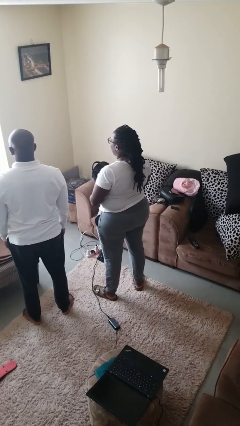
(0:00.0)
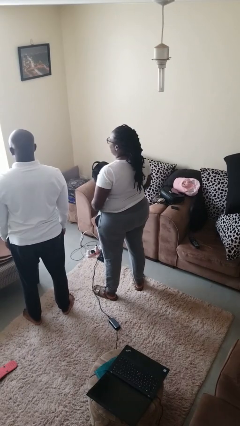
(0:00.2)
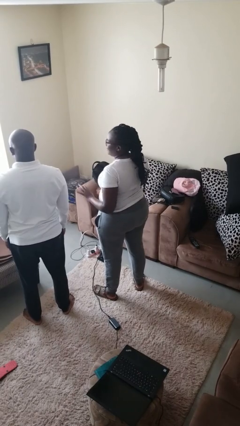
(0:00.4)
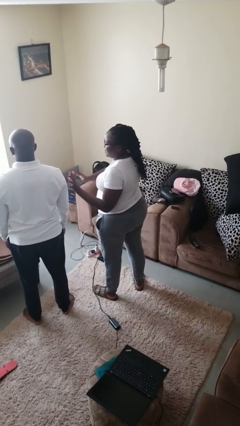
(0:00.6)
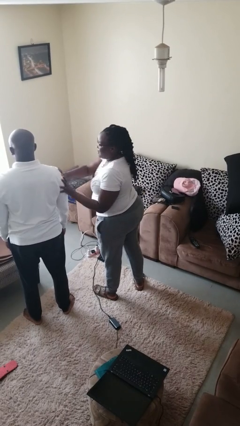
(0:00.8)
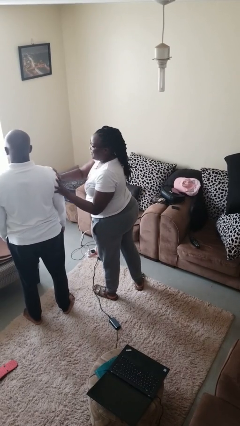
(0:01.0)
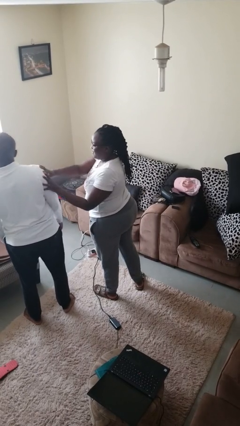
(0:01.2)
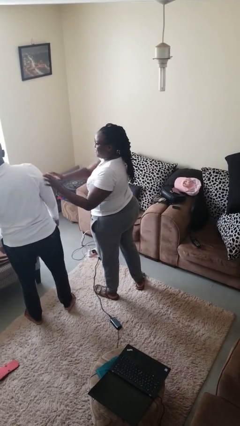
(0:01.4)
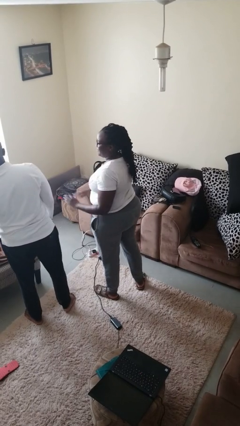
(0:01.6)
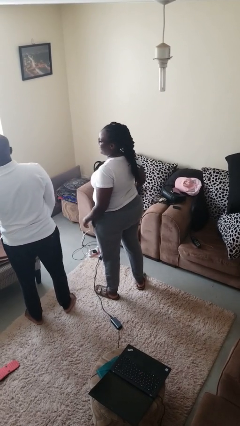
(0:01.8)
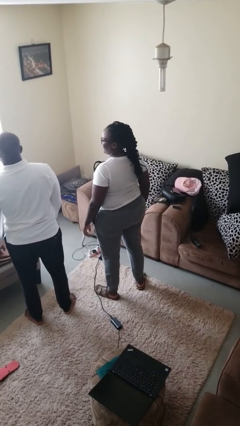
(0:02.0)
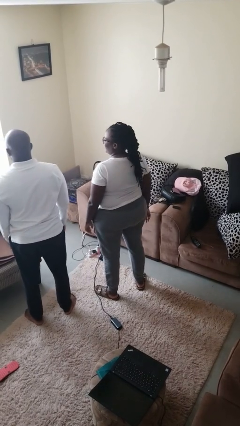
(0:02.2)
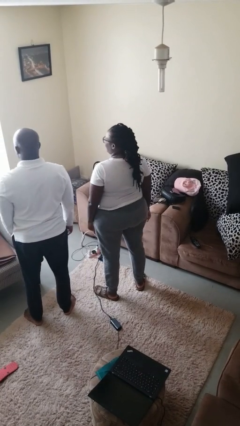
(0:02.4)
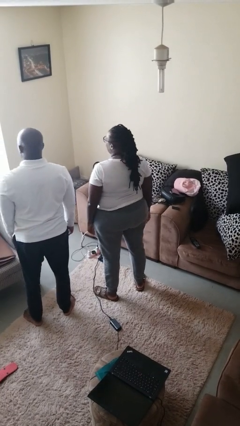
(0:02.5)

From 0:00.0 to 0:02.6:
person shoves person

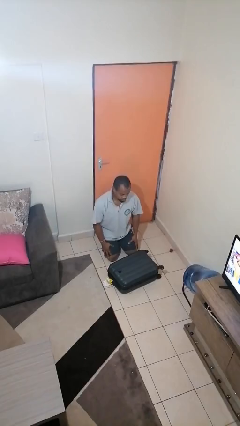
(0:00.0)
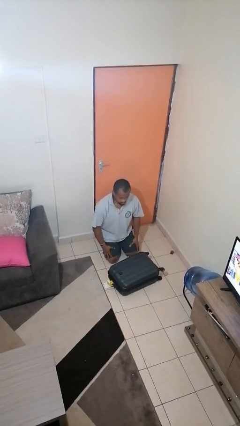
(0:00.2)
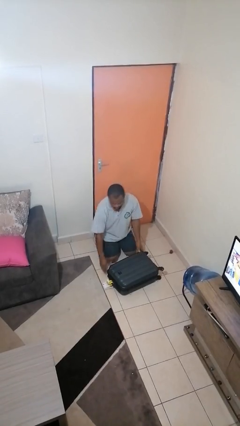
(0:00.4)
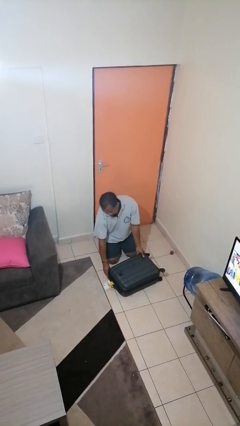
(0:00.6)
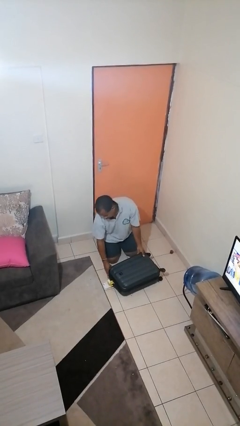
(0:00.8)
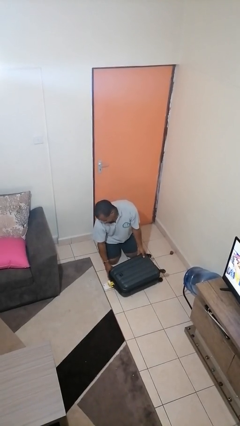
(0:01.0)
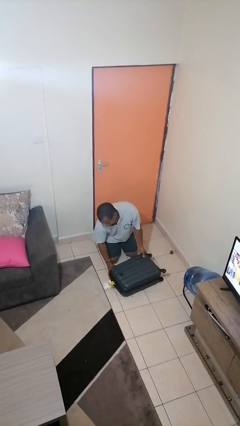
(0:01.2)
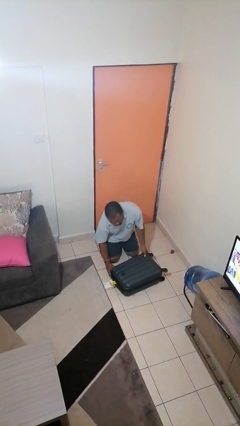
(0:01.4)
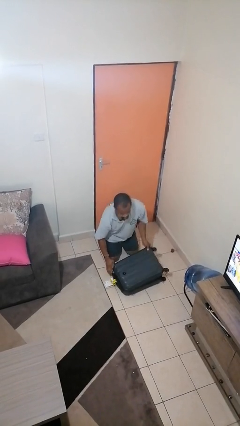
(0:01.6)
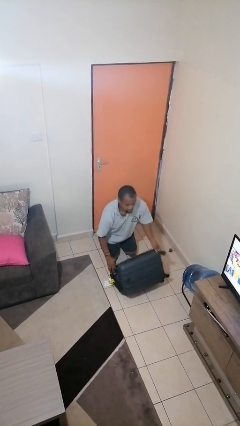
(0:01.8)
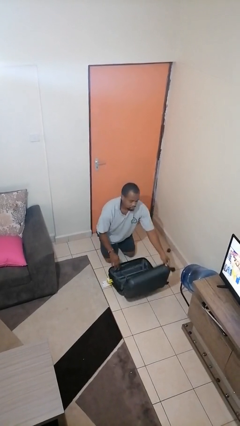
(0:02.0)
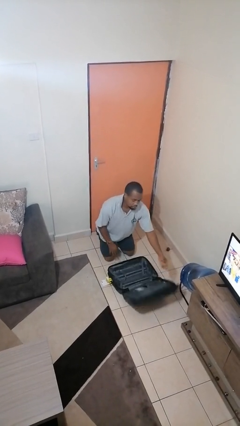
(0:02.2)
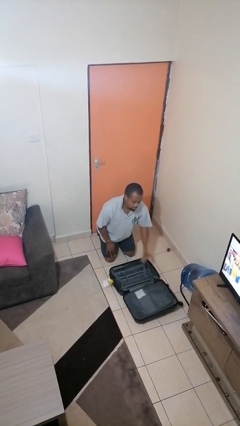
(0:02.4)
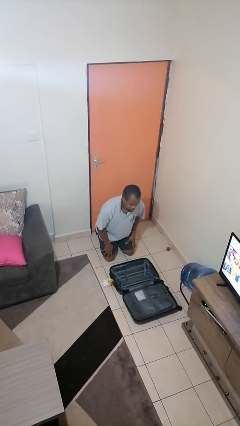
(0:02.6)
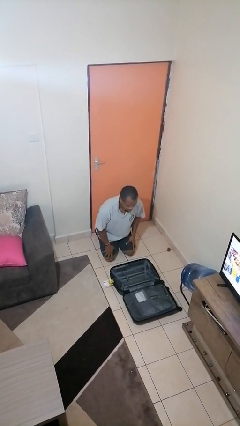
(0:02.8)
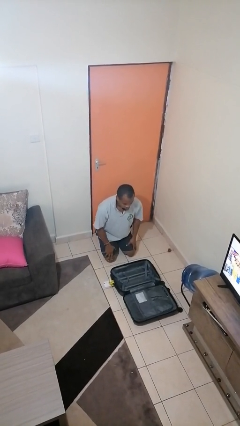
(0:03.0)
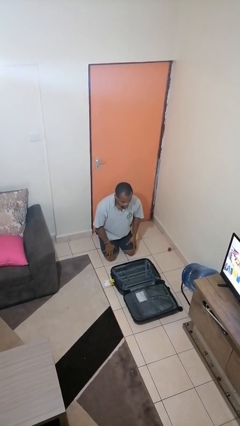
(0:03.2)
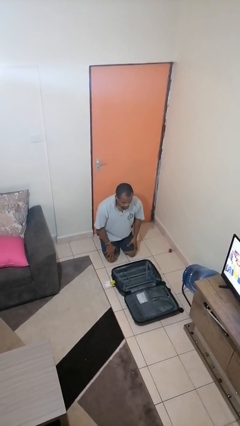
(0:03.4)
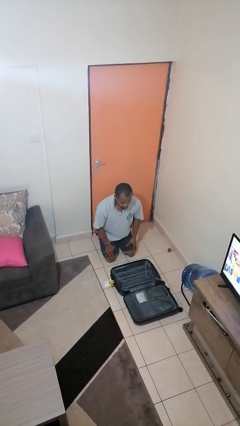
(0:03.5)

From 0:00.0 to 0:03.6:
person opens suitcase

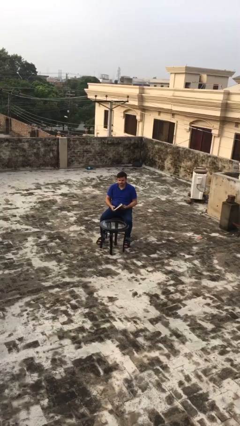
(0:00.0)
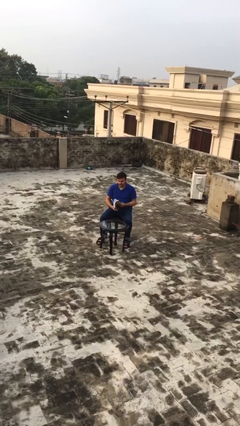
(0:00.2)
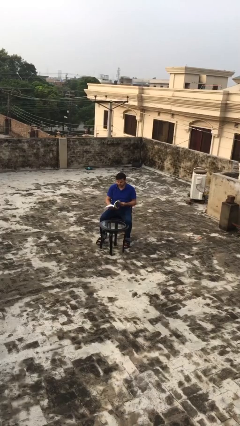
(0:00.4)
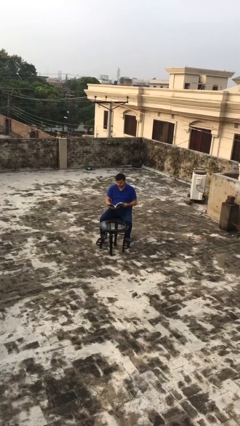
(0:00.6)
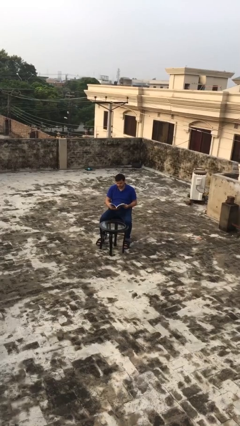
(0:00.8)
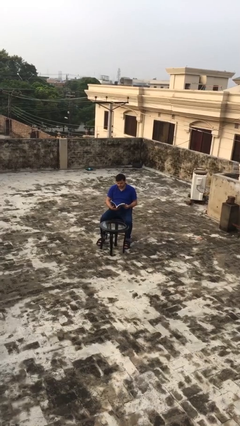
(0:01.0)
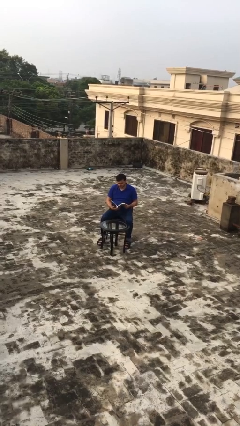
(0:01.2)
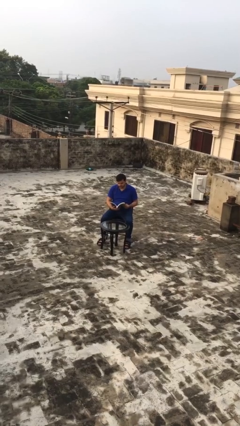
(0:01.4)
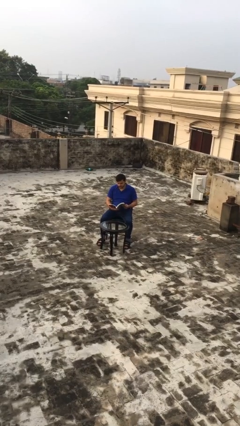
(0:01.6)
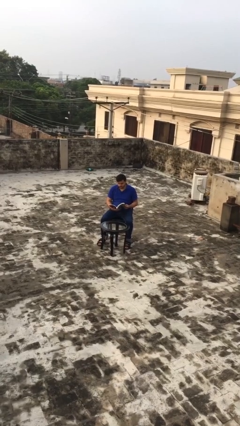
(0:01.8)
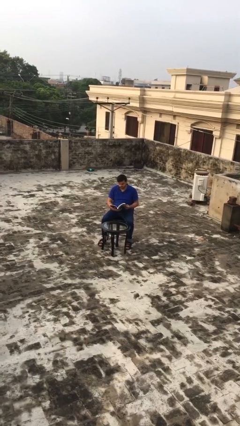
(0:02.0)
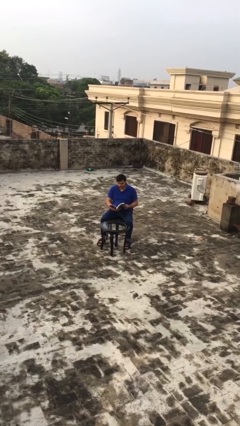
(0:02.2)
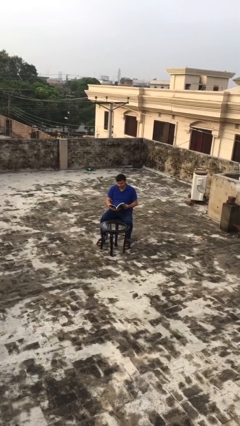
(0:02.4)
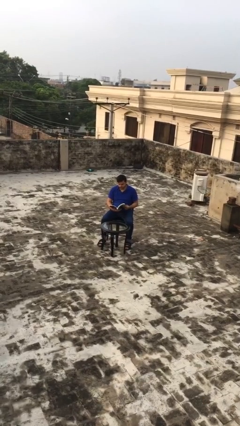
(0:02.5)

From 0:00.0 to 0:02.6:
person reads document

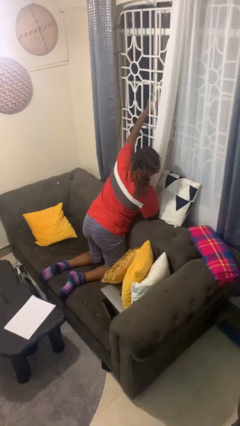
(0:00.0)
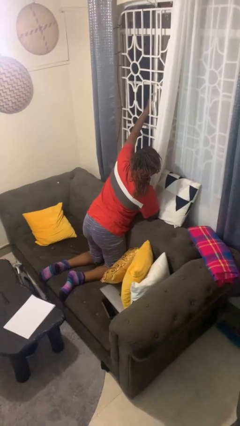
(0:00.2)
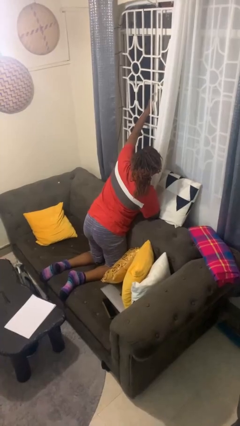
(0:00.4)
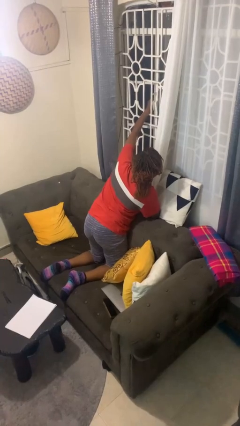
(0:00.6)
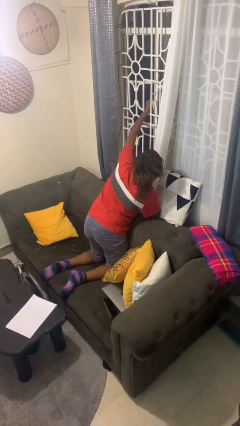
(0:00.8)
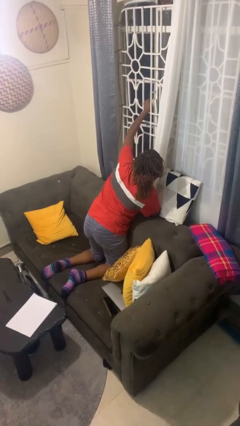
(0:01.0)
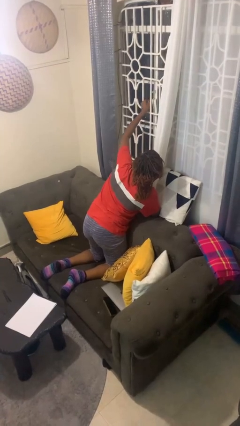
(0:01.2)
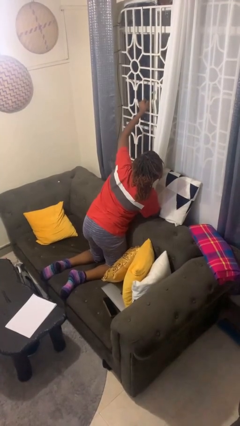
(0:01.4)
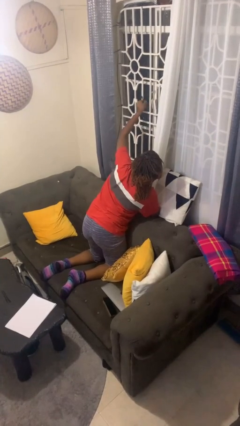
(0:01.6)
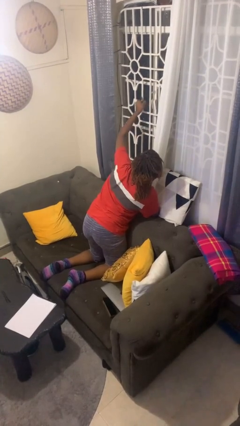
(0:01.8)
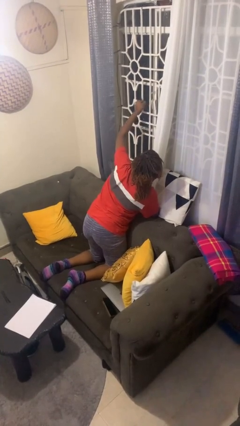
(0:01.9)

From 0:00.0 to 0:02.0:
person closes home window

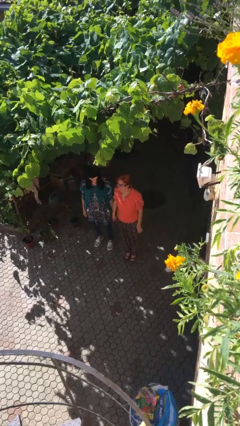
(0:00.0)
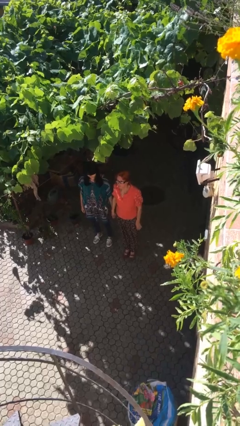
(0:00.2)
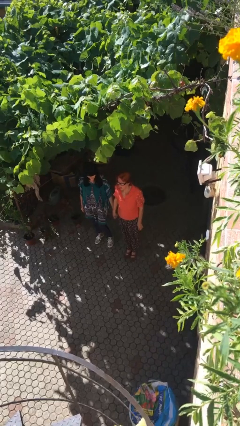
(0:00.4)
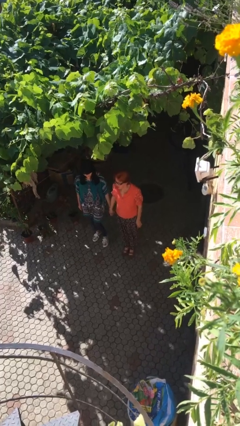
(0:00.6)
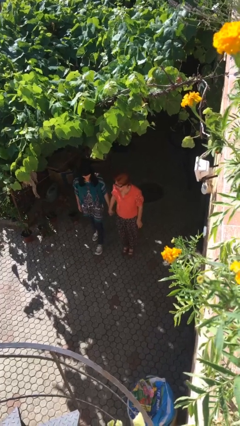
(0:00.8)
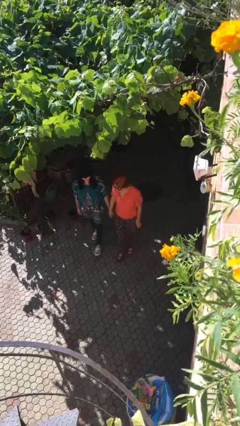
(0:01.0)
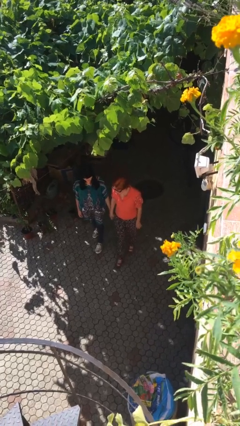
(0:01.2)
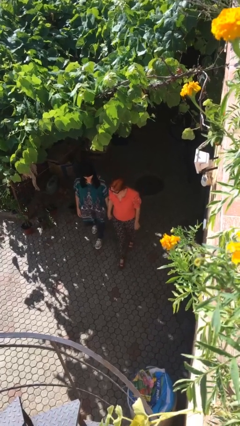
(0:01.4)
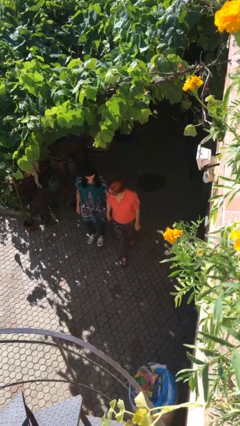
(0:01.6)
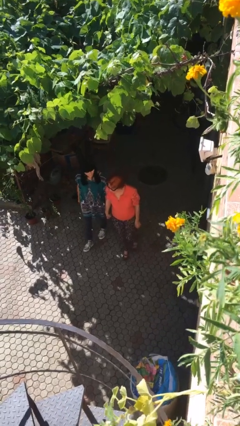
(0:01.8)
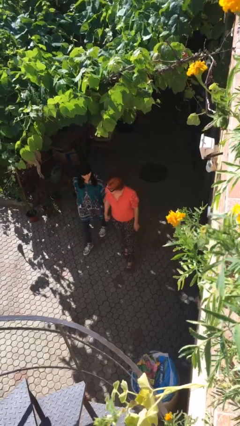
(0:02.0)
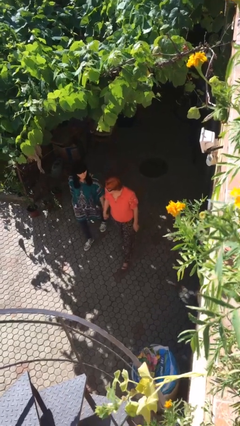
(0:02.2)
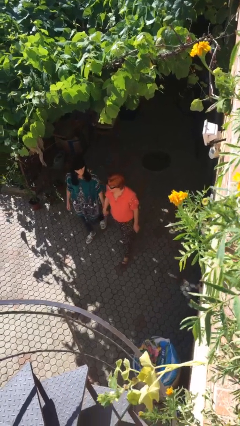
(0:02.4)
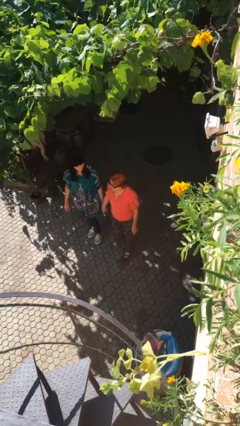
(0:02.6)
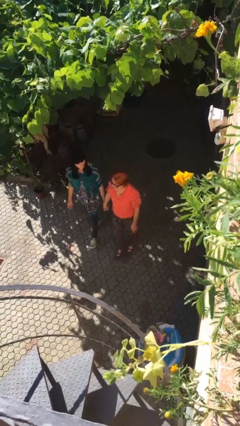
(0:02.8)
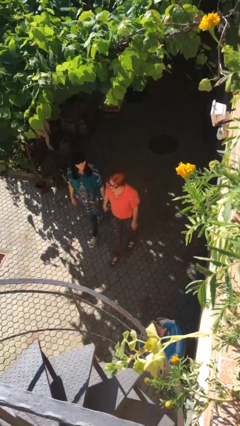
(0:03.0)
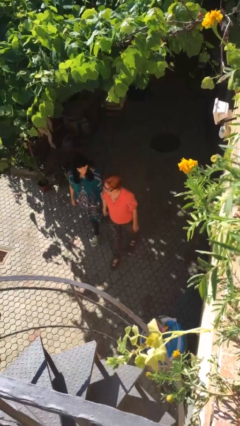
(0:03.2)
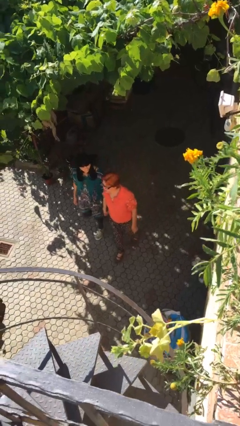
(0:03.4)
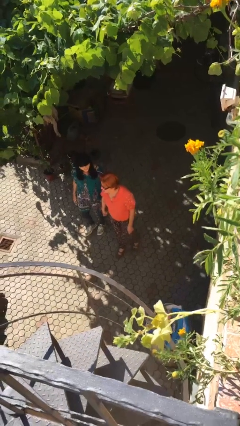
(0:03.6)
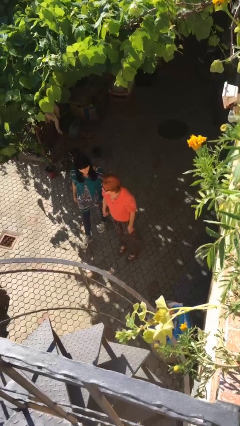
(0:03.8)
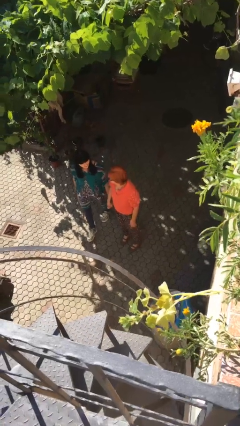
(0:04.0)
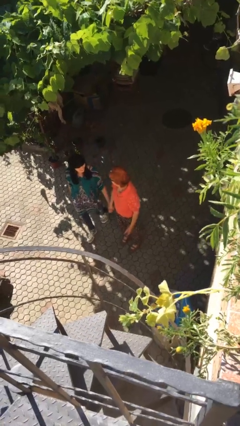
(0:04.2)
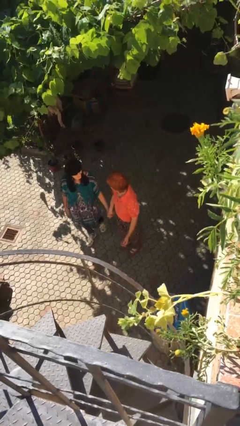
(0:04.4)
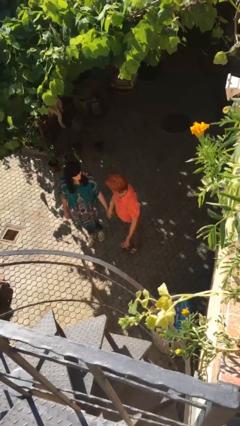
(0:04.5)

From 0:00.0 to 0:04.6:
person holds hand

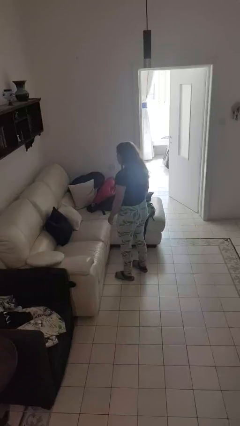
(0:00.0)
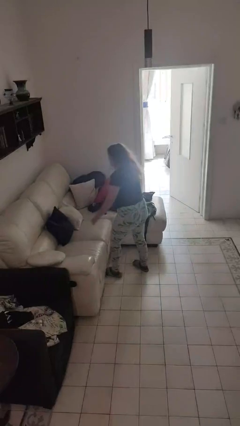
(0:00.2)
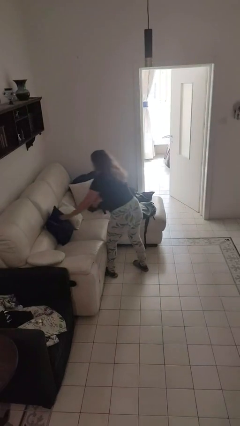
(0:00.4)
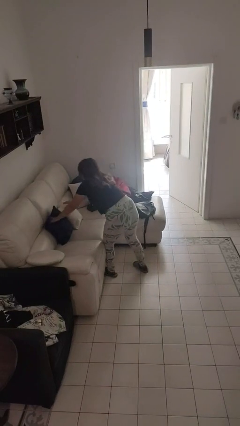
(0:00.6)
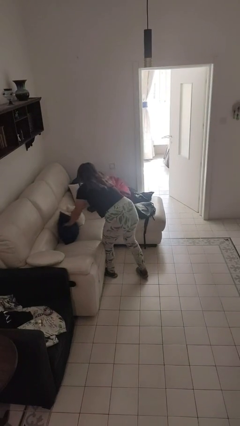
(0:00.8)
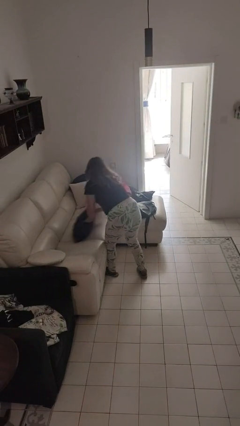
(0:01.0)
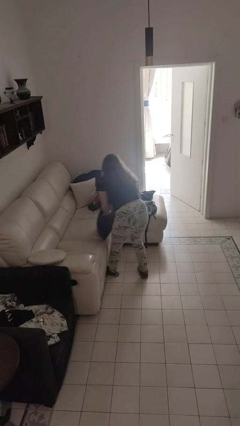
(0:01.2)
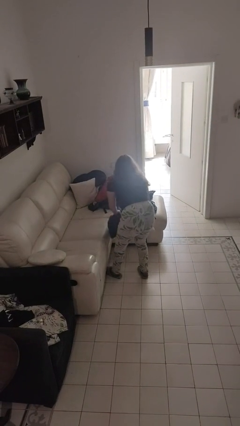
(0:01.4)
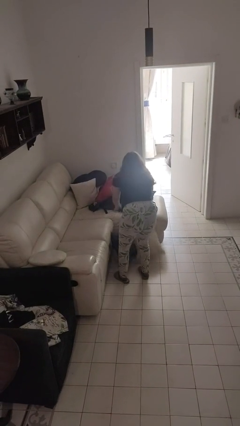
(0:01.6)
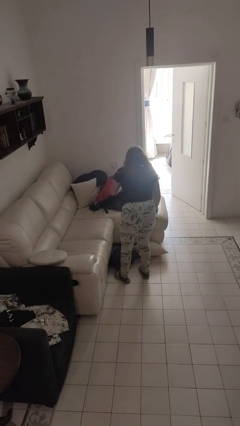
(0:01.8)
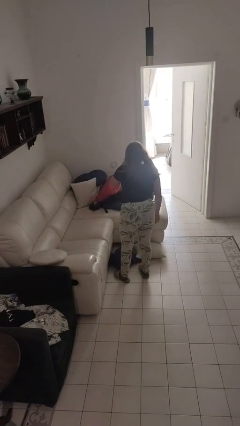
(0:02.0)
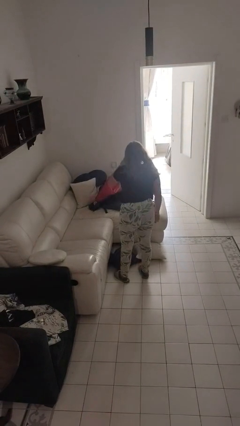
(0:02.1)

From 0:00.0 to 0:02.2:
person knocks over furniture
